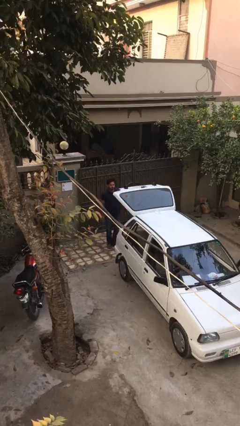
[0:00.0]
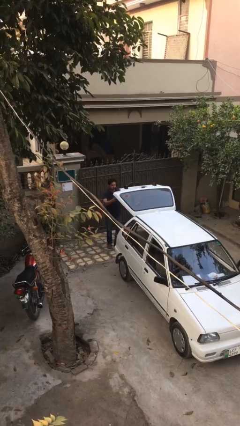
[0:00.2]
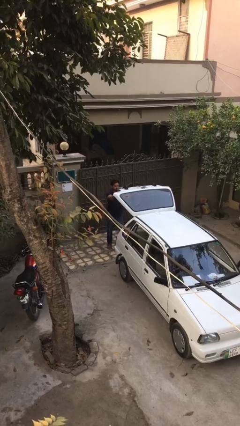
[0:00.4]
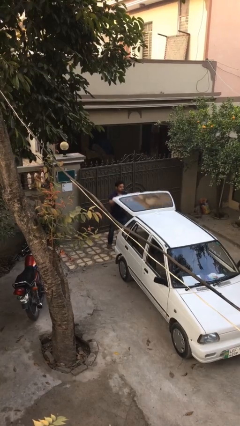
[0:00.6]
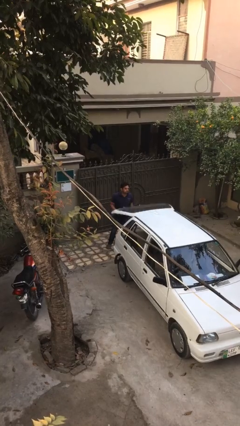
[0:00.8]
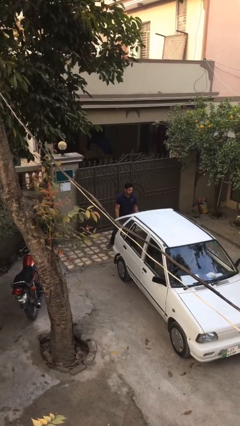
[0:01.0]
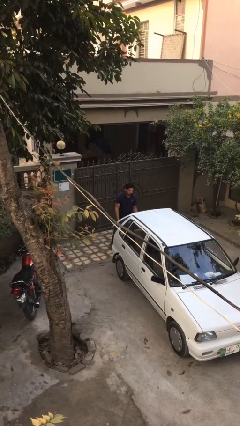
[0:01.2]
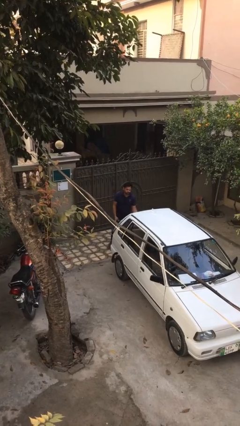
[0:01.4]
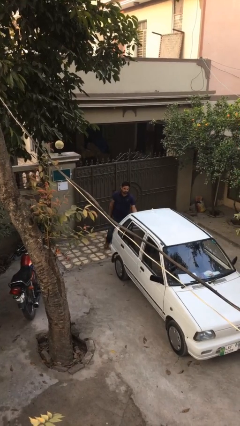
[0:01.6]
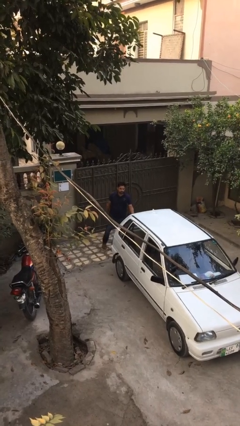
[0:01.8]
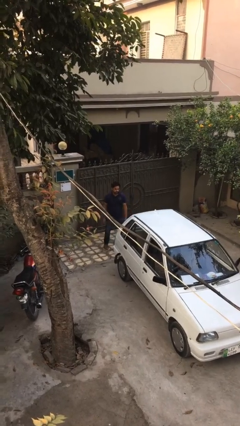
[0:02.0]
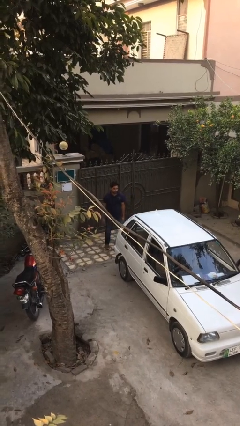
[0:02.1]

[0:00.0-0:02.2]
person closes car trunk

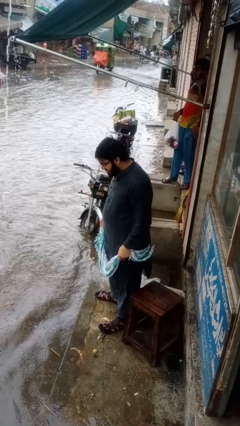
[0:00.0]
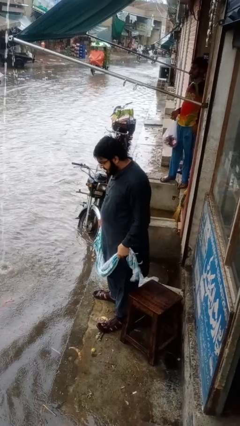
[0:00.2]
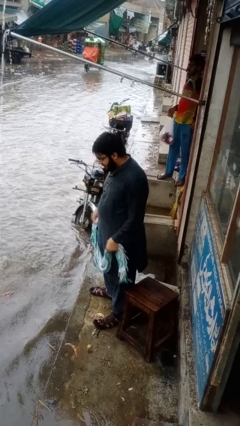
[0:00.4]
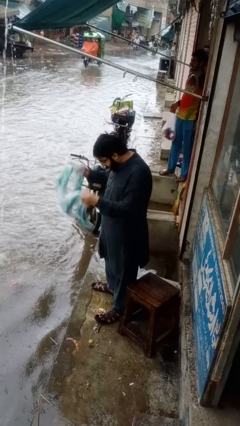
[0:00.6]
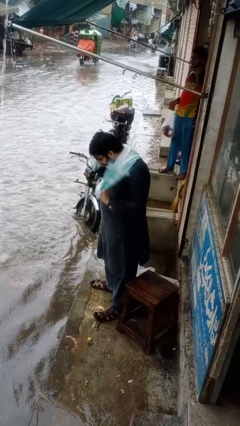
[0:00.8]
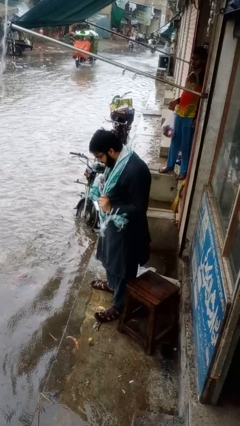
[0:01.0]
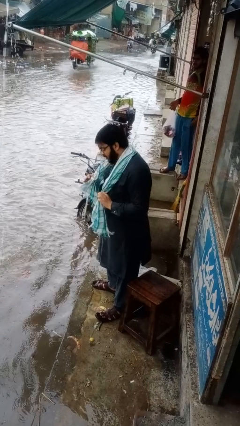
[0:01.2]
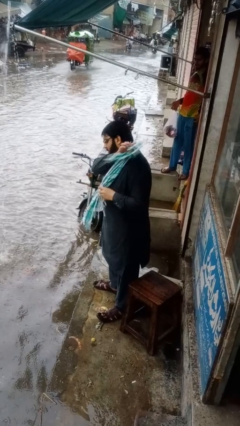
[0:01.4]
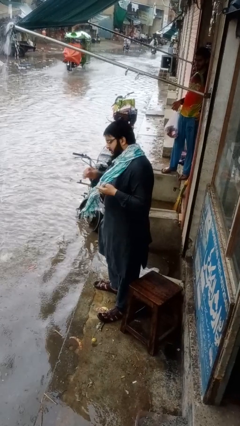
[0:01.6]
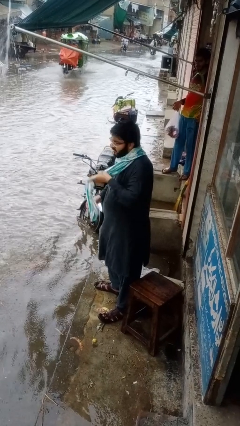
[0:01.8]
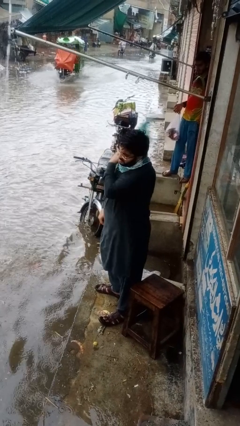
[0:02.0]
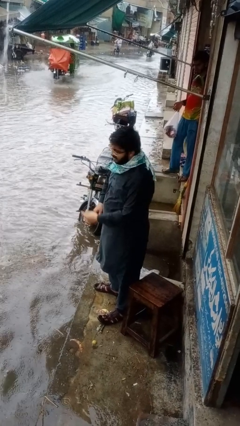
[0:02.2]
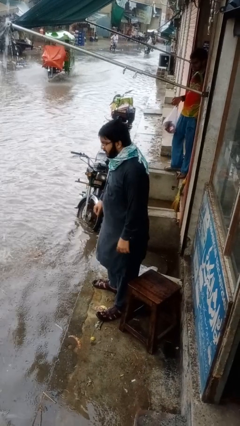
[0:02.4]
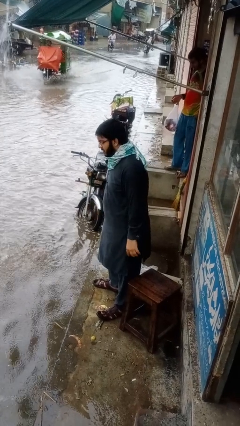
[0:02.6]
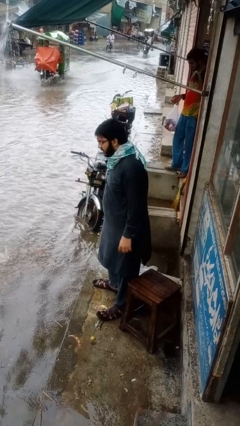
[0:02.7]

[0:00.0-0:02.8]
person puts on scarf

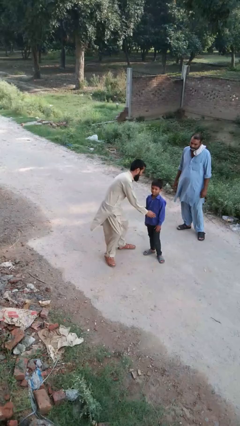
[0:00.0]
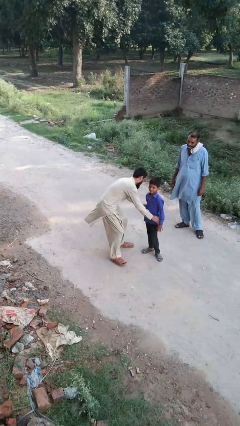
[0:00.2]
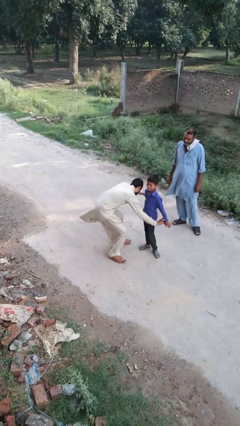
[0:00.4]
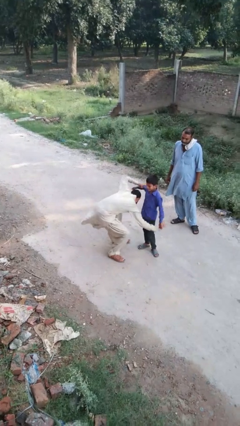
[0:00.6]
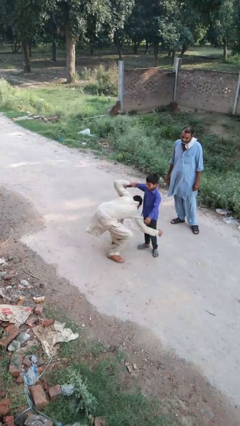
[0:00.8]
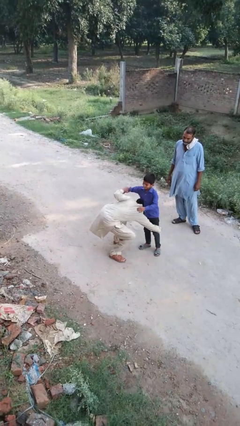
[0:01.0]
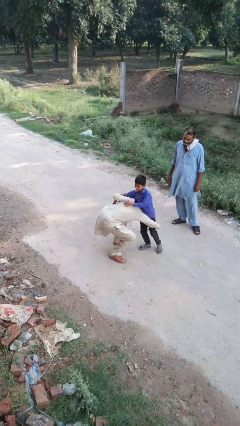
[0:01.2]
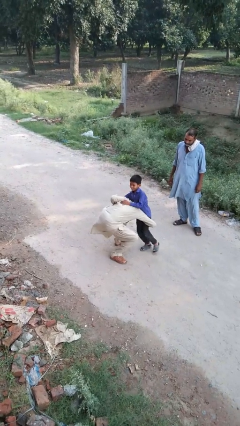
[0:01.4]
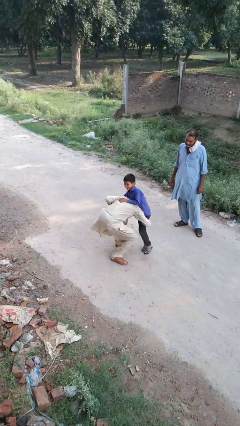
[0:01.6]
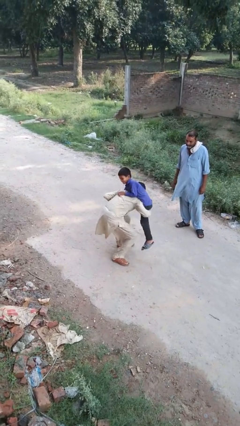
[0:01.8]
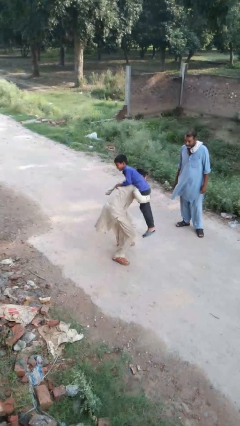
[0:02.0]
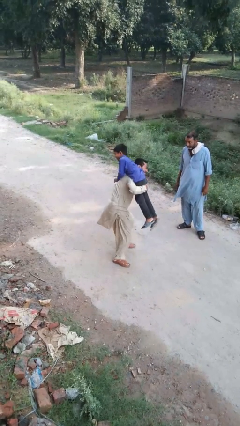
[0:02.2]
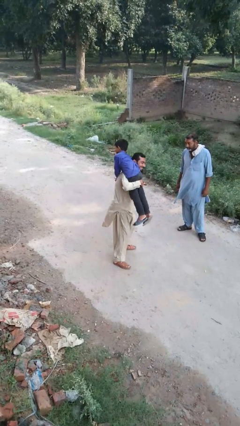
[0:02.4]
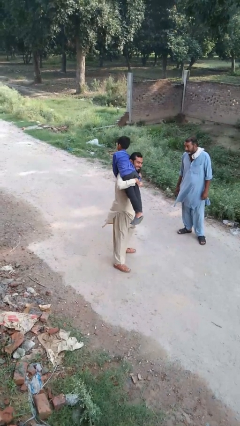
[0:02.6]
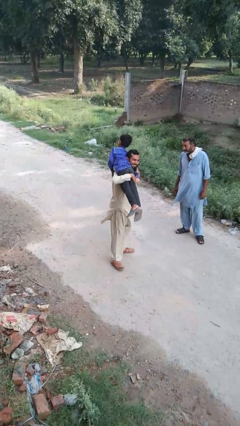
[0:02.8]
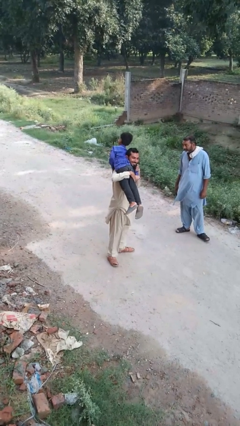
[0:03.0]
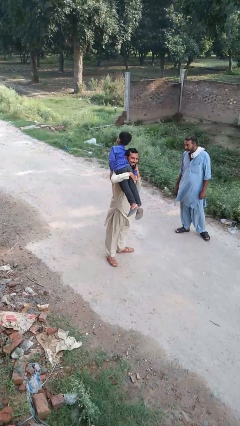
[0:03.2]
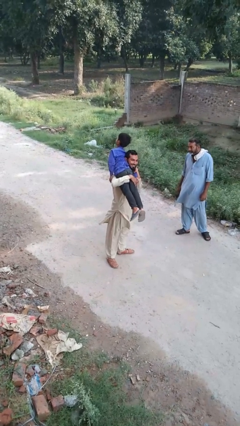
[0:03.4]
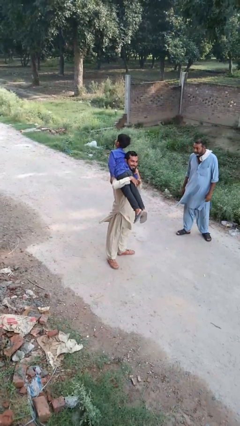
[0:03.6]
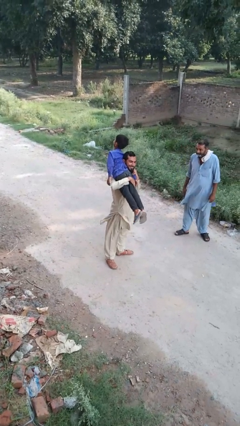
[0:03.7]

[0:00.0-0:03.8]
person carries person over shoulder

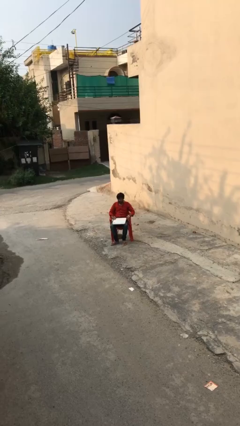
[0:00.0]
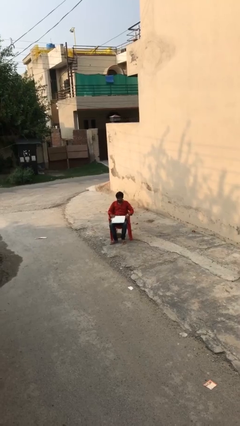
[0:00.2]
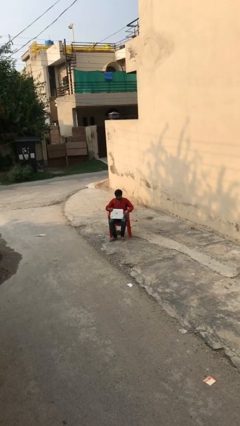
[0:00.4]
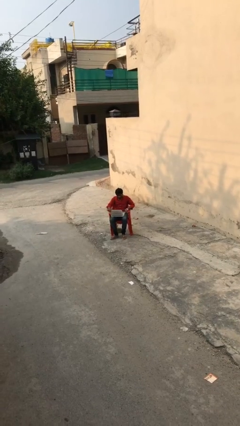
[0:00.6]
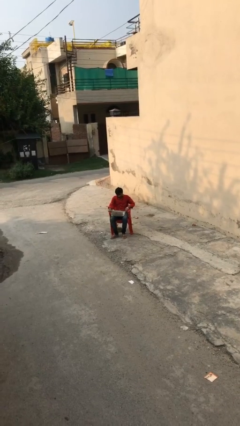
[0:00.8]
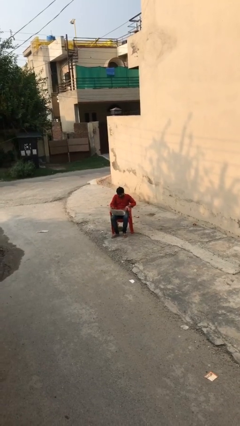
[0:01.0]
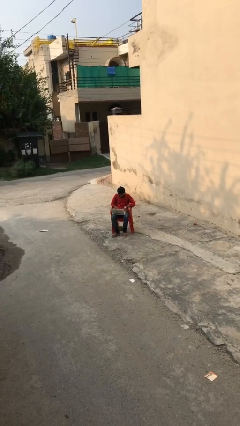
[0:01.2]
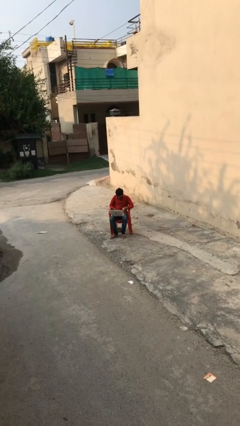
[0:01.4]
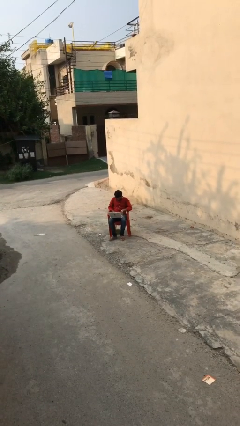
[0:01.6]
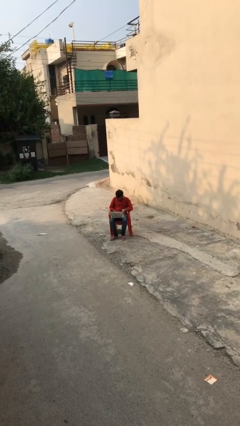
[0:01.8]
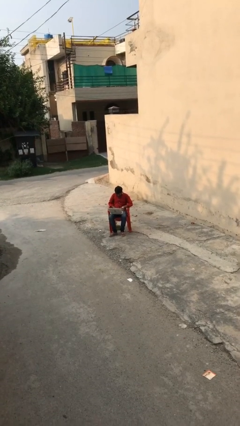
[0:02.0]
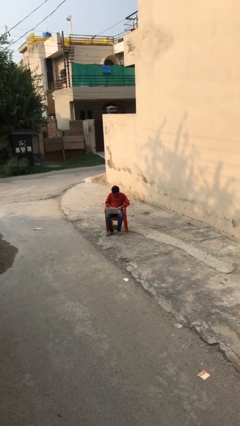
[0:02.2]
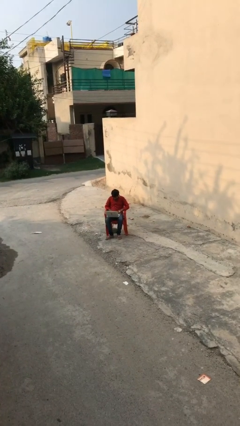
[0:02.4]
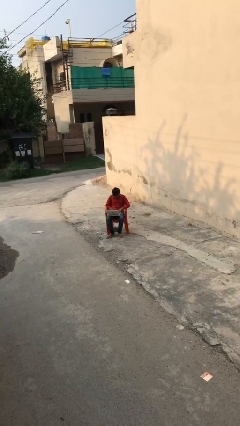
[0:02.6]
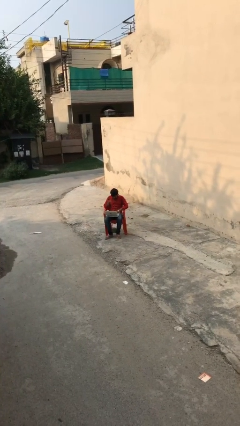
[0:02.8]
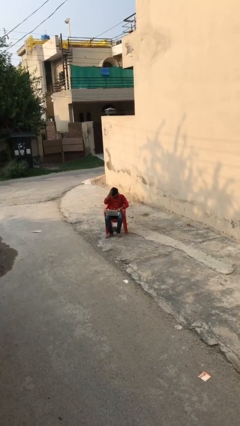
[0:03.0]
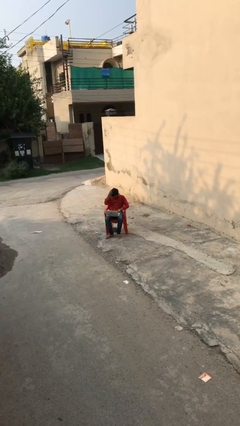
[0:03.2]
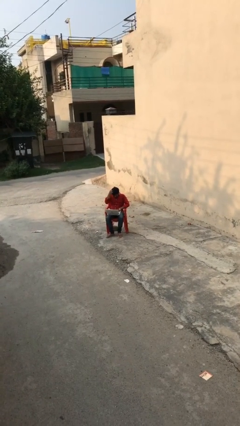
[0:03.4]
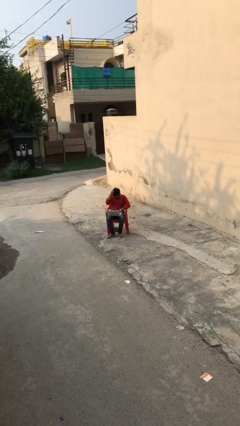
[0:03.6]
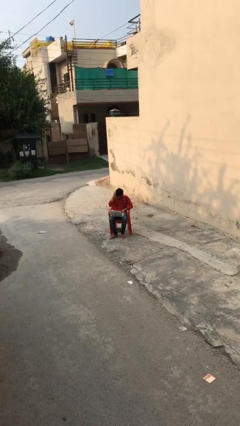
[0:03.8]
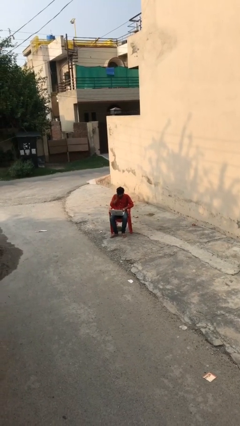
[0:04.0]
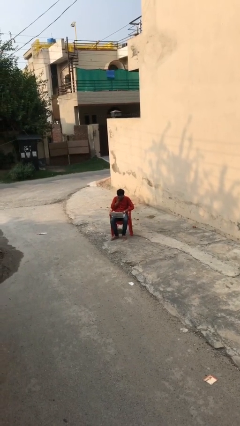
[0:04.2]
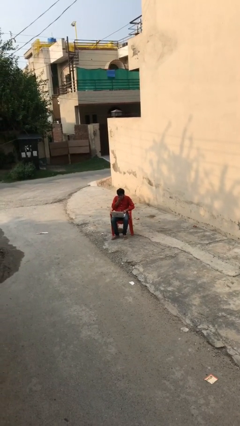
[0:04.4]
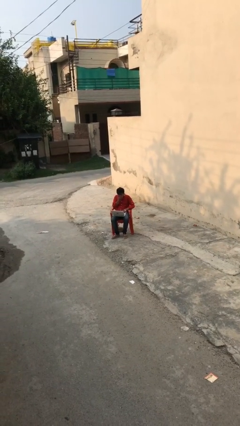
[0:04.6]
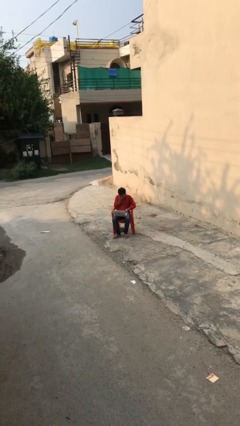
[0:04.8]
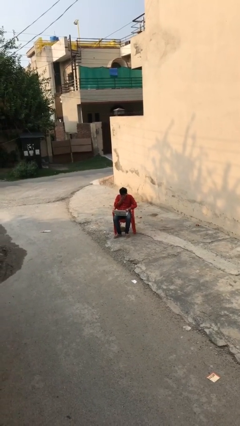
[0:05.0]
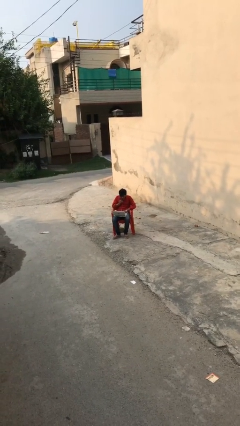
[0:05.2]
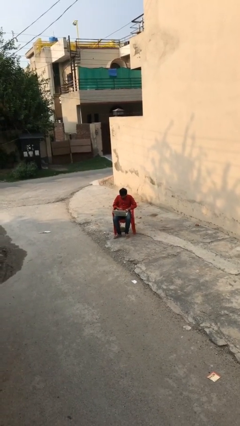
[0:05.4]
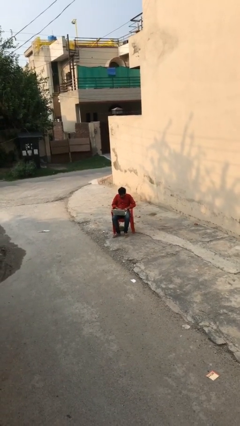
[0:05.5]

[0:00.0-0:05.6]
person interacts with laptop

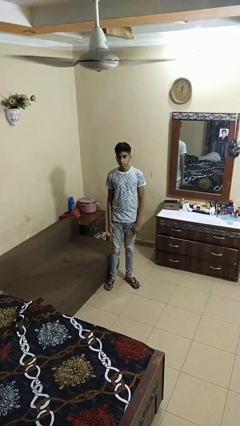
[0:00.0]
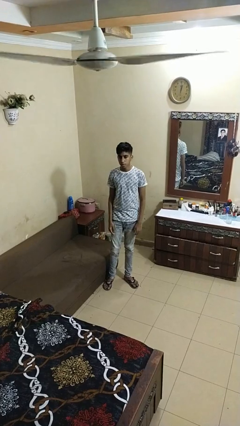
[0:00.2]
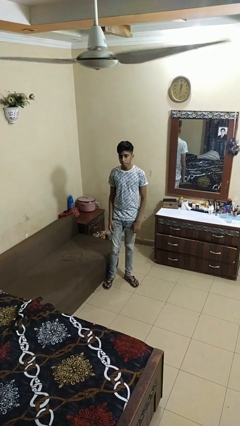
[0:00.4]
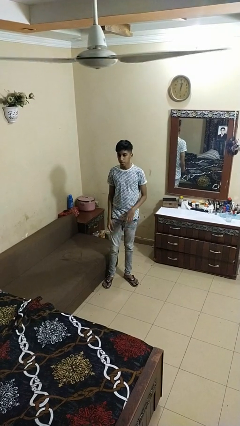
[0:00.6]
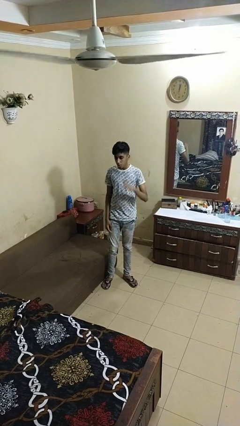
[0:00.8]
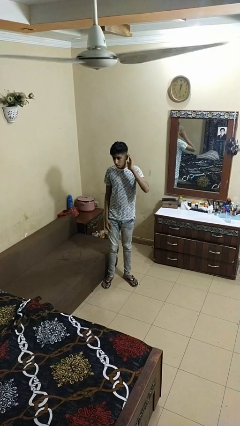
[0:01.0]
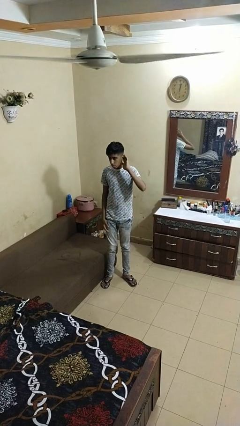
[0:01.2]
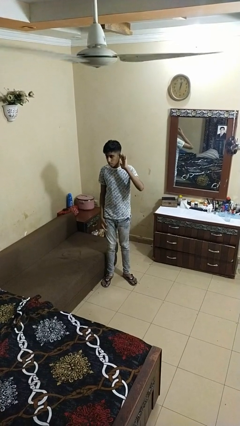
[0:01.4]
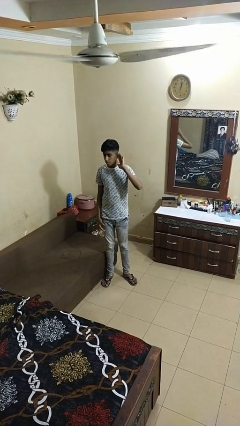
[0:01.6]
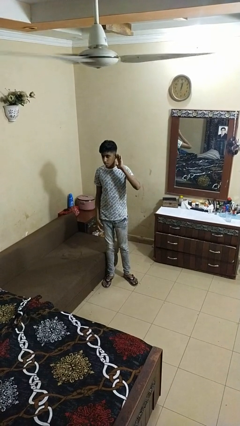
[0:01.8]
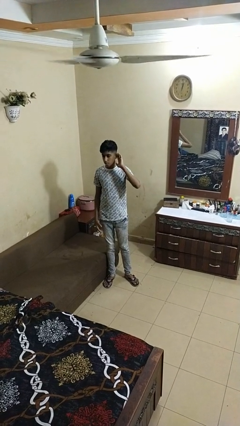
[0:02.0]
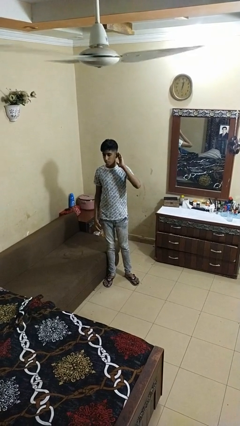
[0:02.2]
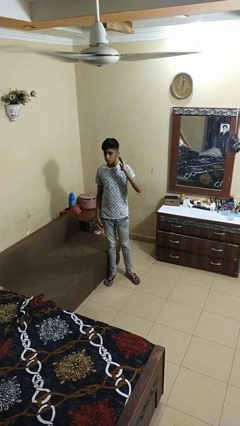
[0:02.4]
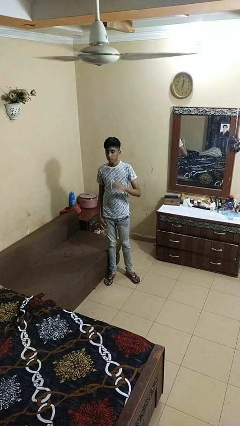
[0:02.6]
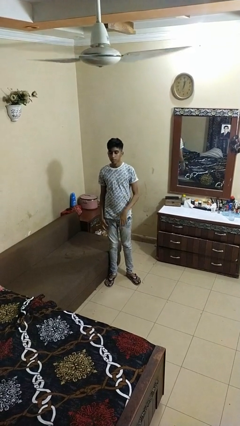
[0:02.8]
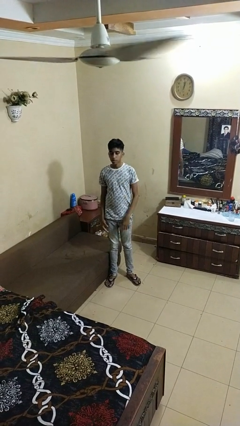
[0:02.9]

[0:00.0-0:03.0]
person gestures listen closely
